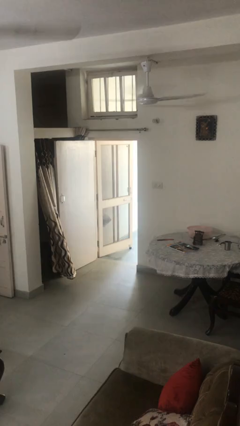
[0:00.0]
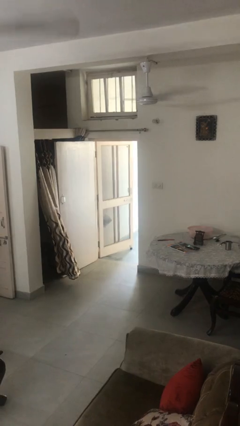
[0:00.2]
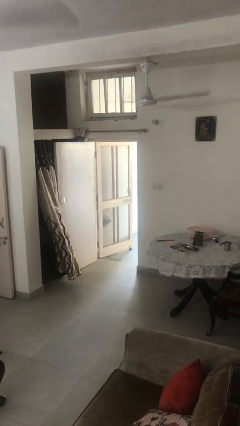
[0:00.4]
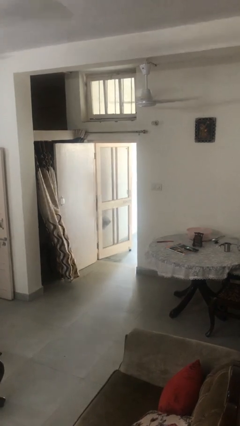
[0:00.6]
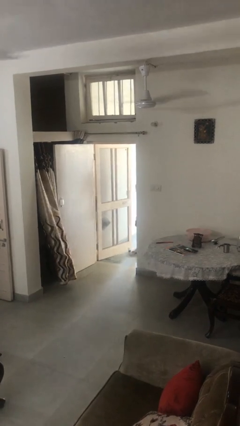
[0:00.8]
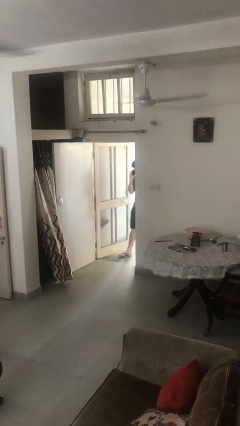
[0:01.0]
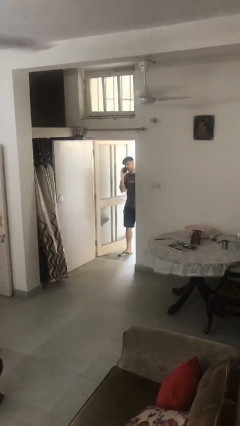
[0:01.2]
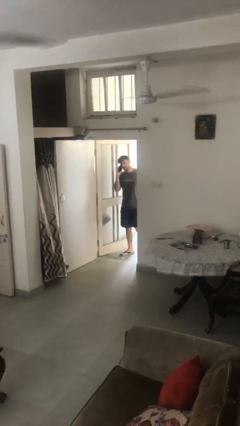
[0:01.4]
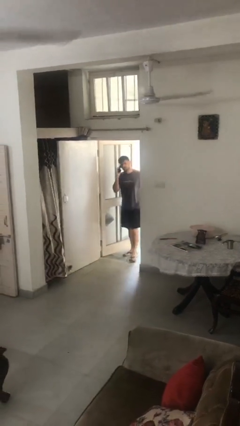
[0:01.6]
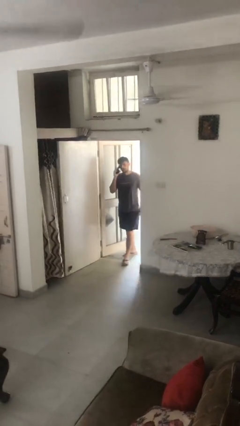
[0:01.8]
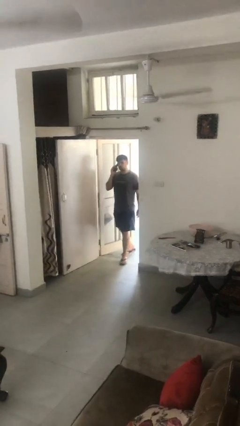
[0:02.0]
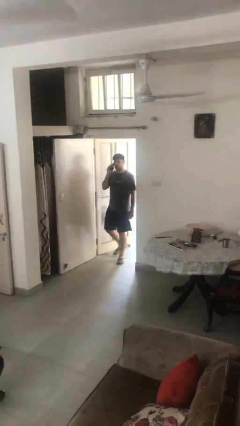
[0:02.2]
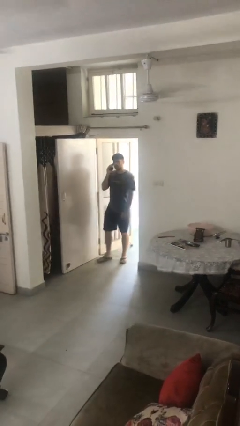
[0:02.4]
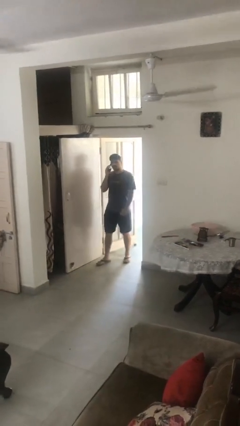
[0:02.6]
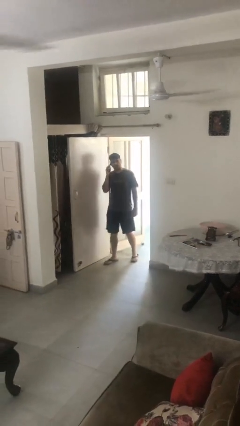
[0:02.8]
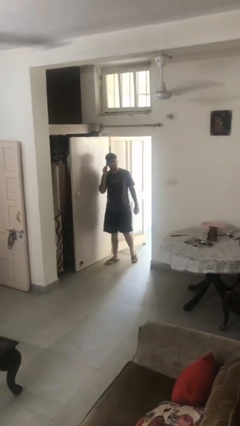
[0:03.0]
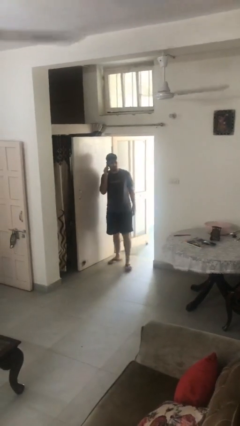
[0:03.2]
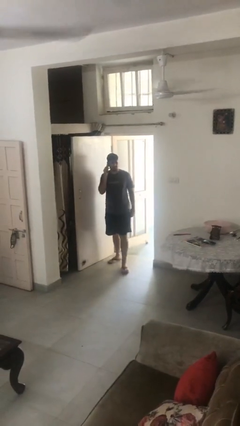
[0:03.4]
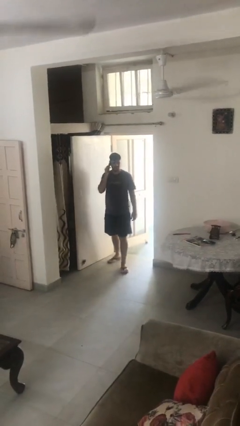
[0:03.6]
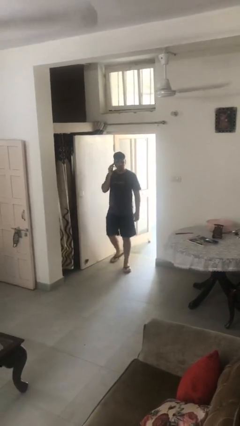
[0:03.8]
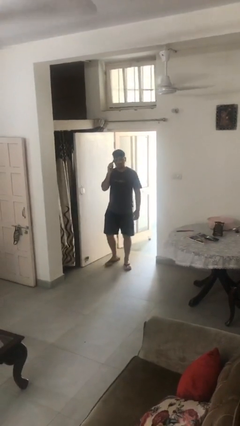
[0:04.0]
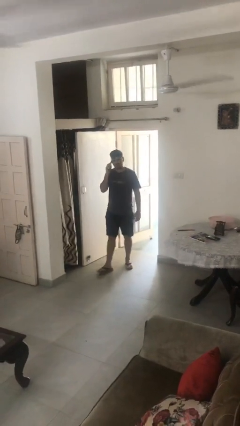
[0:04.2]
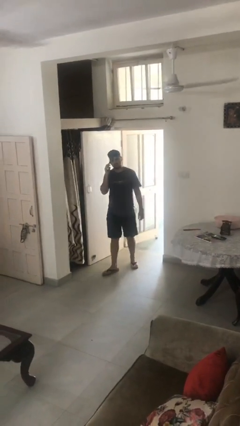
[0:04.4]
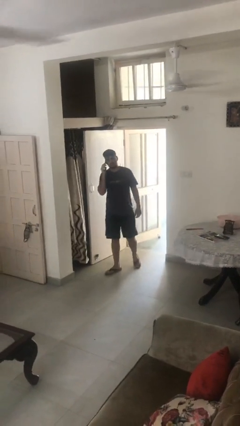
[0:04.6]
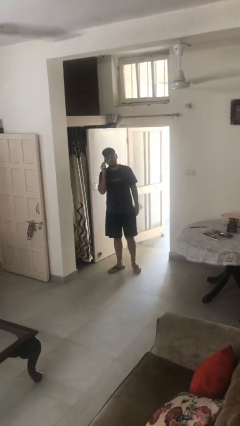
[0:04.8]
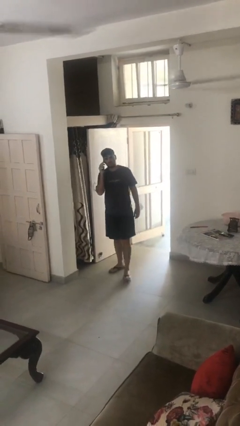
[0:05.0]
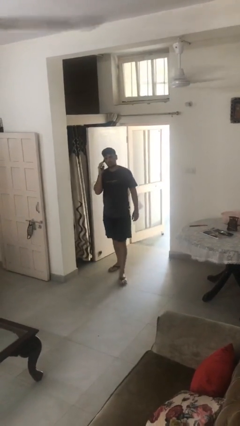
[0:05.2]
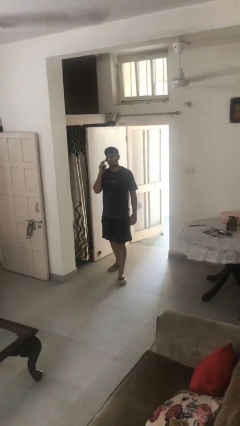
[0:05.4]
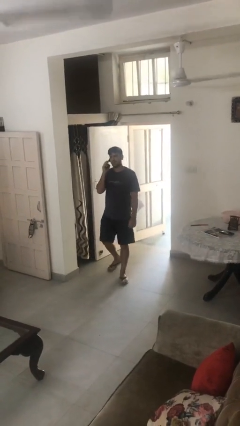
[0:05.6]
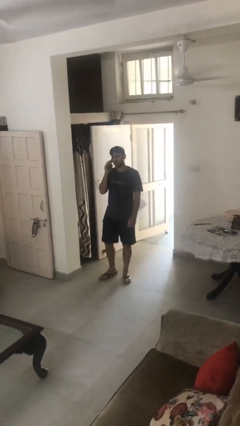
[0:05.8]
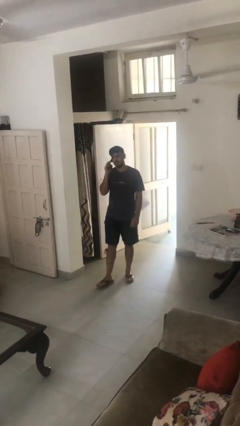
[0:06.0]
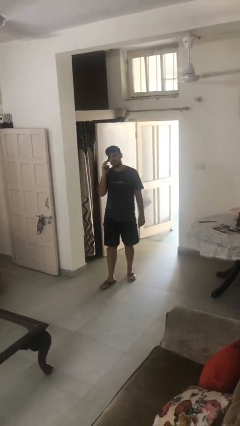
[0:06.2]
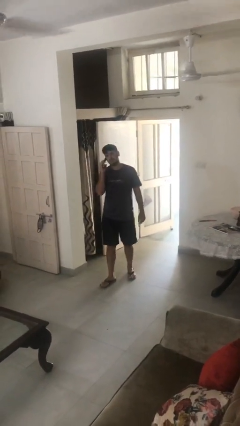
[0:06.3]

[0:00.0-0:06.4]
person enters scene through structure

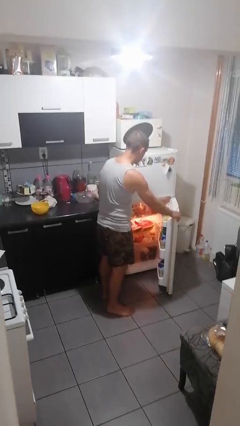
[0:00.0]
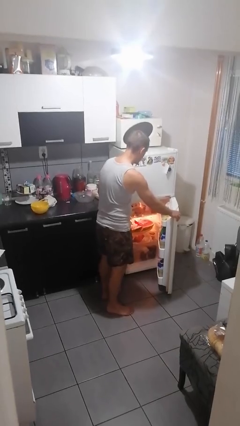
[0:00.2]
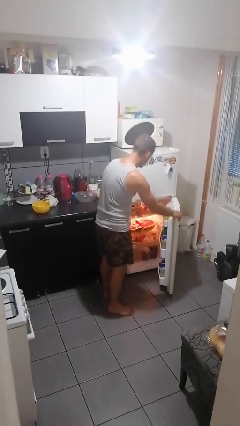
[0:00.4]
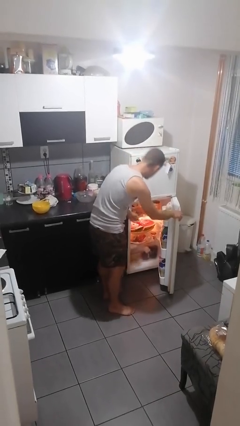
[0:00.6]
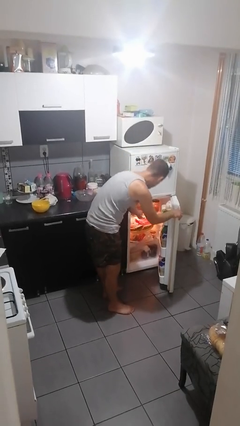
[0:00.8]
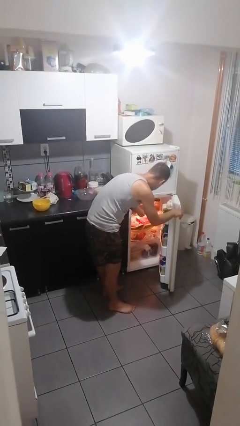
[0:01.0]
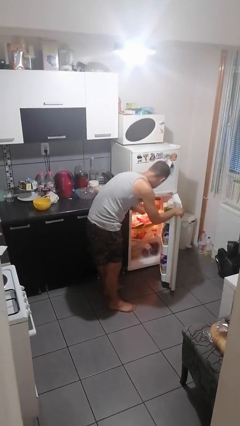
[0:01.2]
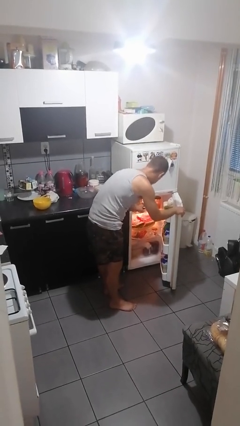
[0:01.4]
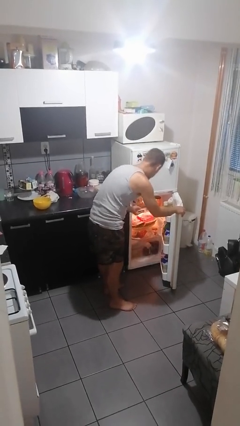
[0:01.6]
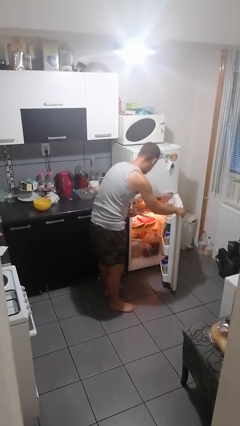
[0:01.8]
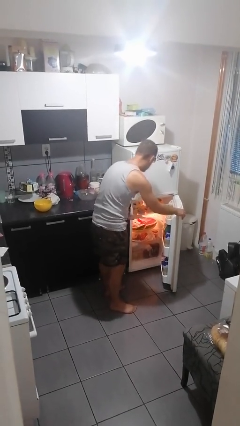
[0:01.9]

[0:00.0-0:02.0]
person takes object from refrigerator

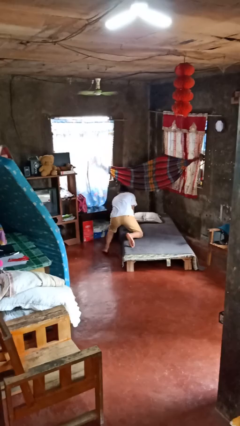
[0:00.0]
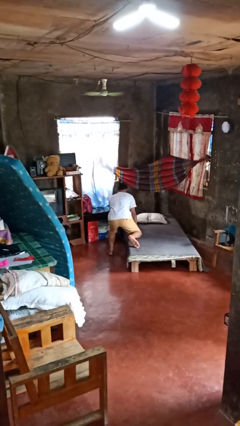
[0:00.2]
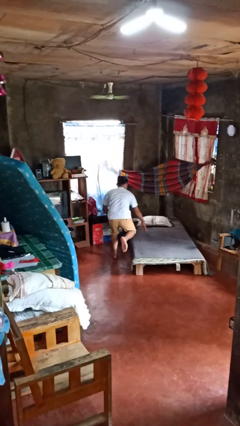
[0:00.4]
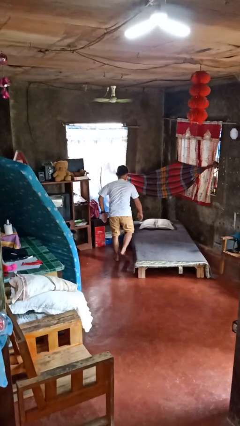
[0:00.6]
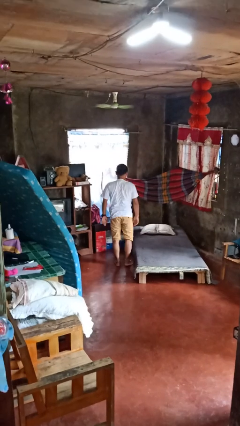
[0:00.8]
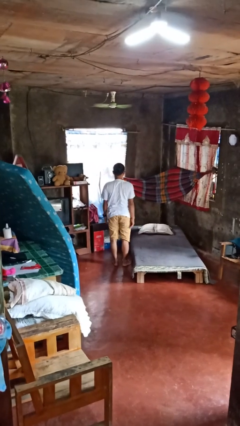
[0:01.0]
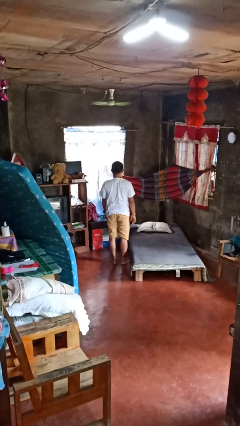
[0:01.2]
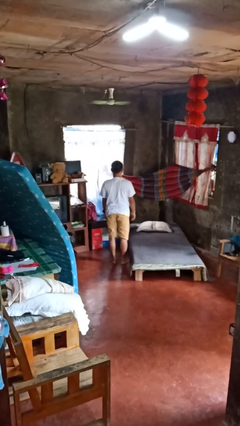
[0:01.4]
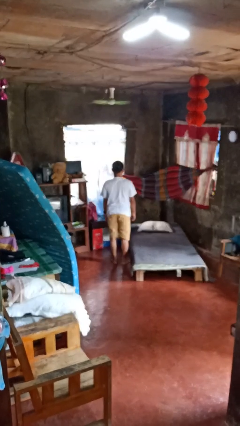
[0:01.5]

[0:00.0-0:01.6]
person stands up

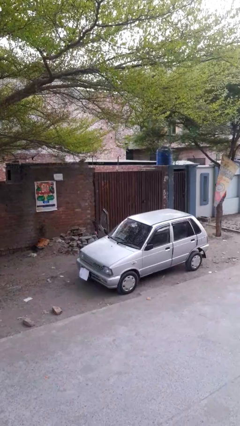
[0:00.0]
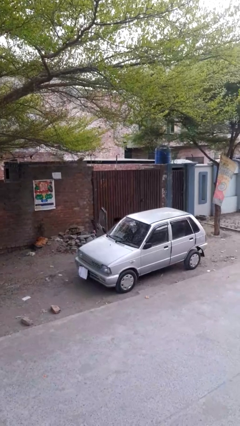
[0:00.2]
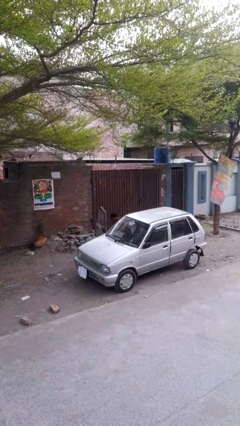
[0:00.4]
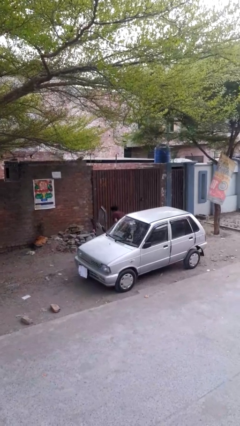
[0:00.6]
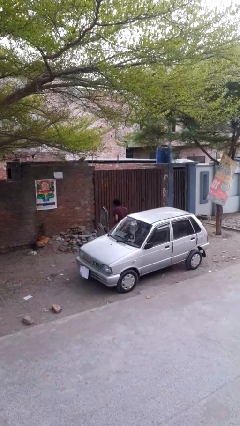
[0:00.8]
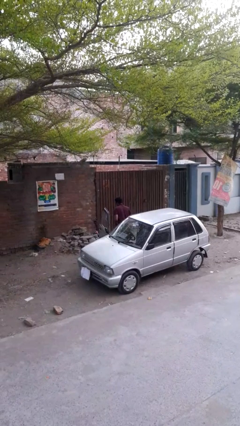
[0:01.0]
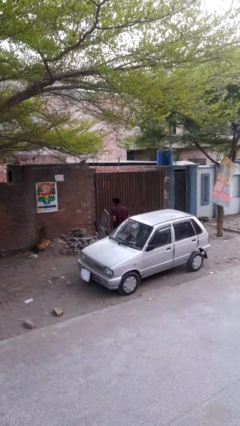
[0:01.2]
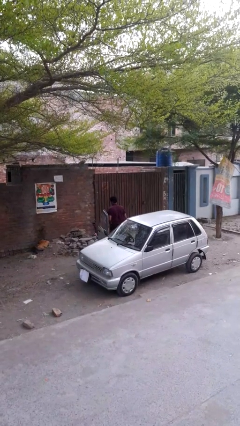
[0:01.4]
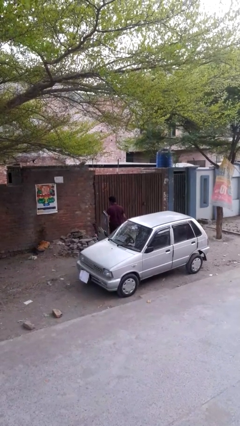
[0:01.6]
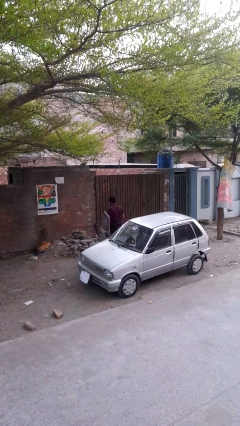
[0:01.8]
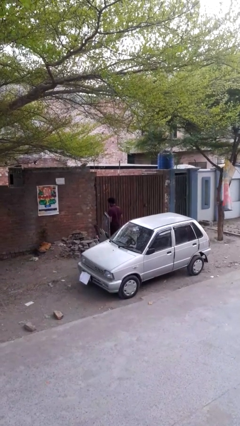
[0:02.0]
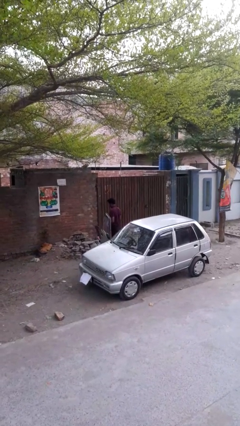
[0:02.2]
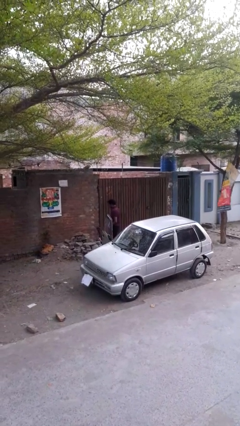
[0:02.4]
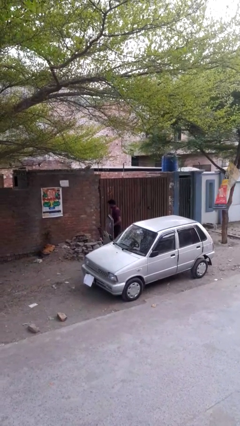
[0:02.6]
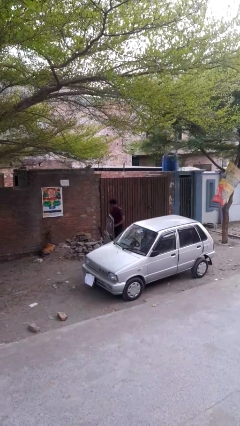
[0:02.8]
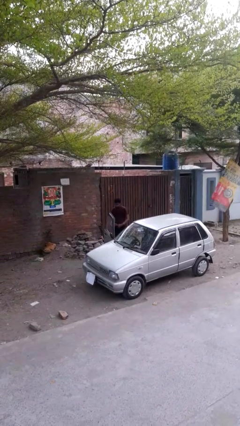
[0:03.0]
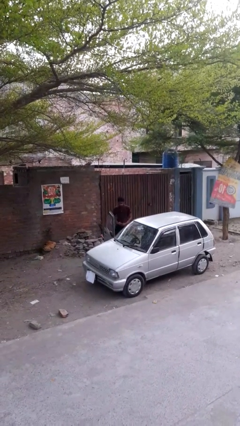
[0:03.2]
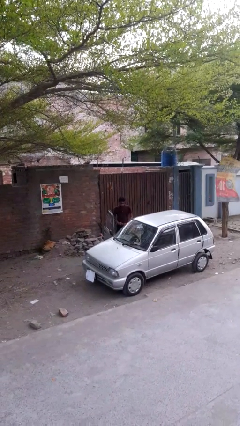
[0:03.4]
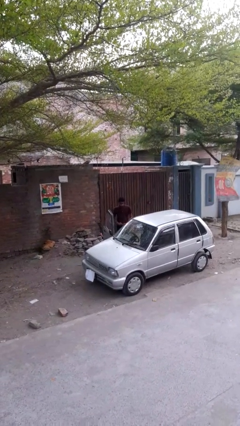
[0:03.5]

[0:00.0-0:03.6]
person exits car

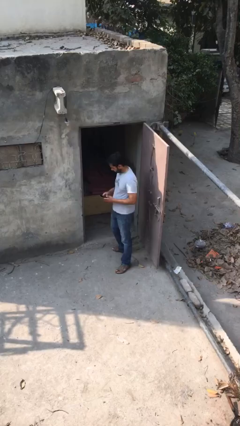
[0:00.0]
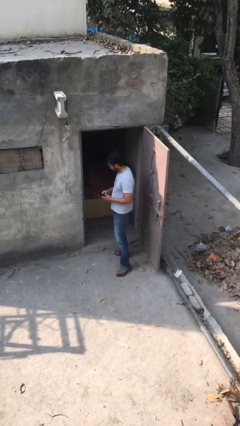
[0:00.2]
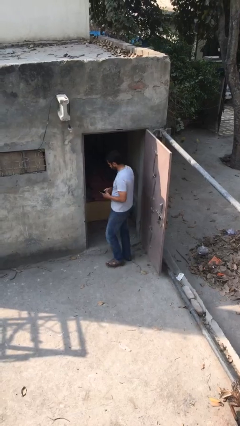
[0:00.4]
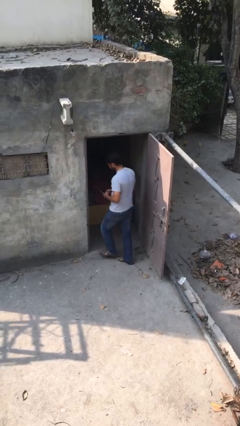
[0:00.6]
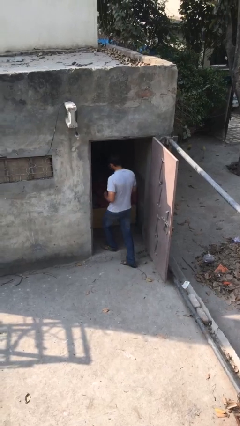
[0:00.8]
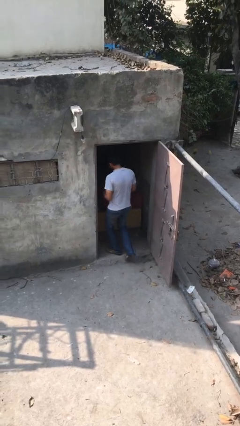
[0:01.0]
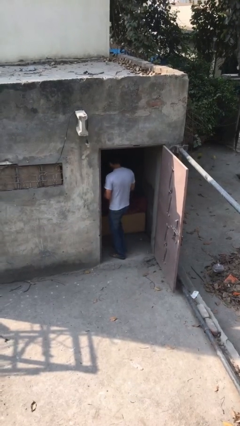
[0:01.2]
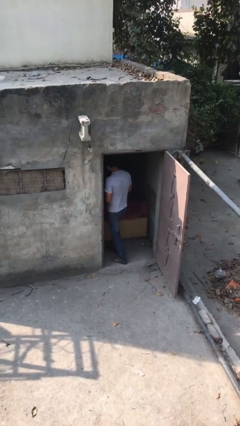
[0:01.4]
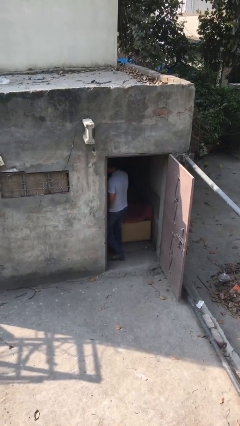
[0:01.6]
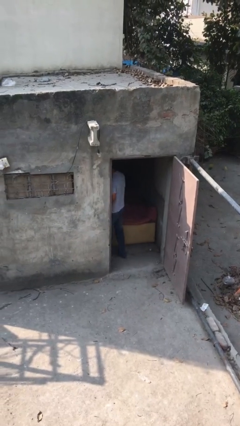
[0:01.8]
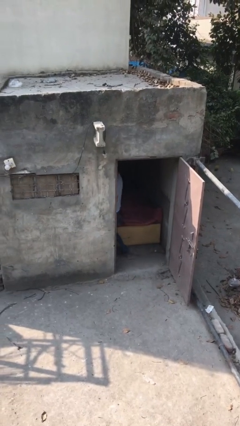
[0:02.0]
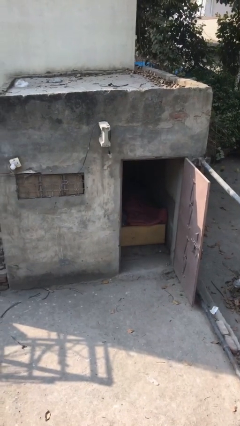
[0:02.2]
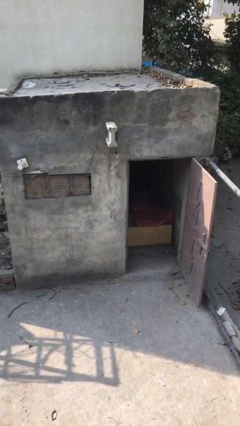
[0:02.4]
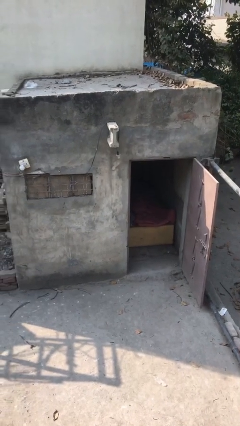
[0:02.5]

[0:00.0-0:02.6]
person exits scene through structure

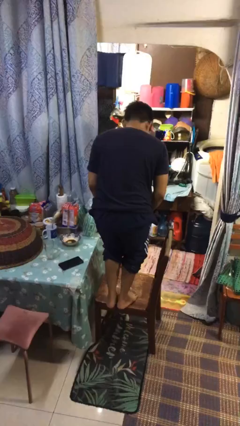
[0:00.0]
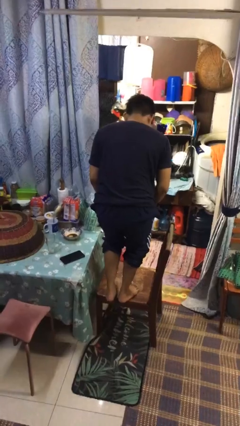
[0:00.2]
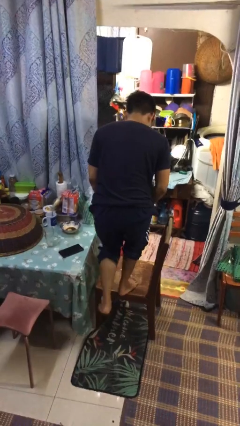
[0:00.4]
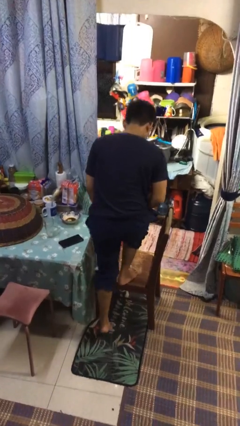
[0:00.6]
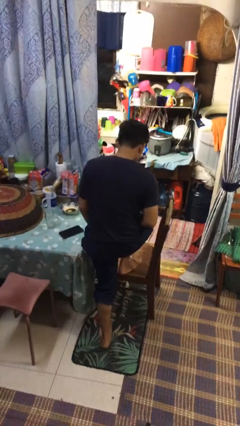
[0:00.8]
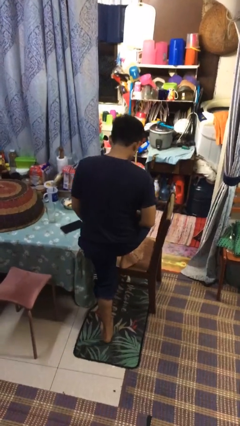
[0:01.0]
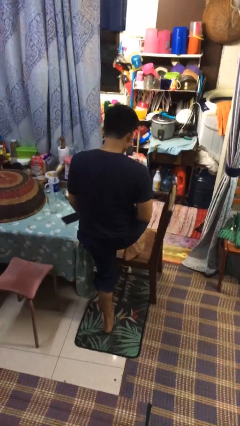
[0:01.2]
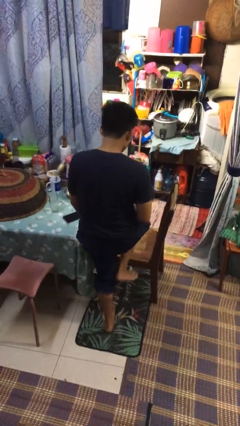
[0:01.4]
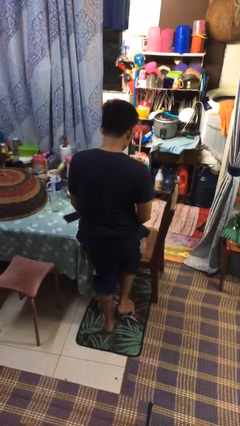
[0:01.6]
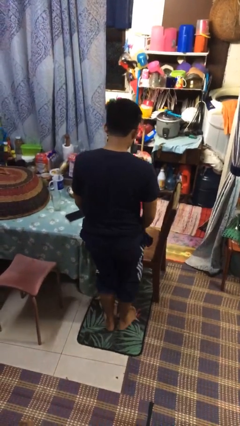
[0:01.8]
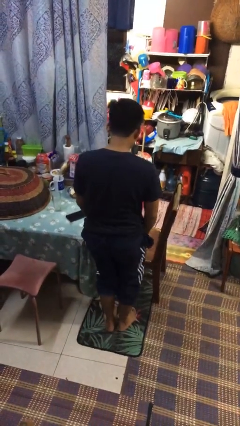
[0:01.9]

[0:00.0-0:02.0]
person climbs off chair
